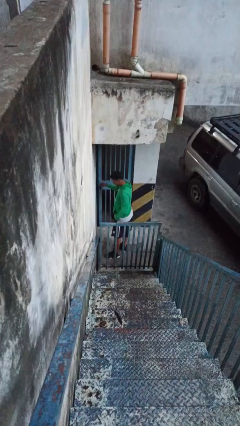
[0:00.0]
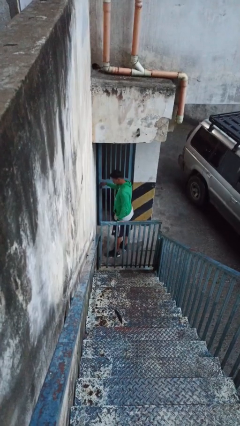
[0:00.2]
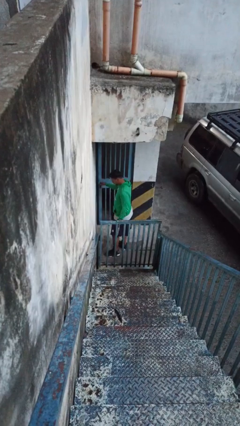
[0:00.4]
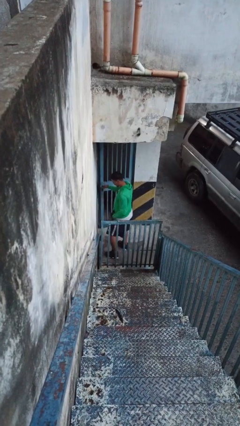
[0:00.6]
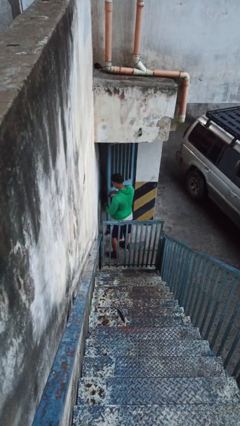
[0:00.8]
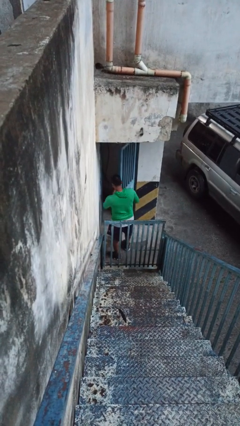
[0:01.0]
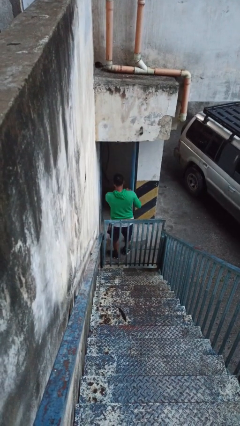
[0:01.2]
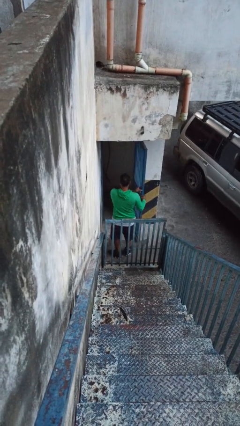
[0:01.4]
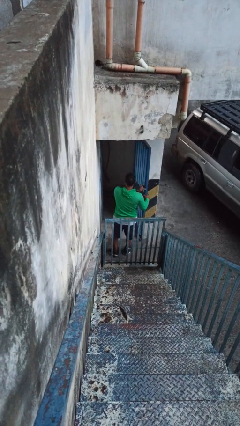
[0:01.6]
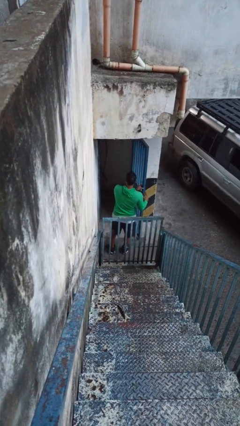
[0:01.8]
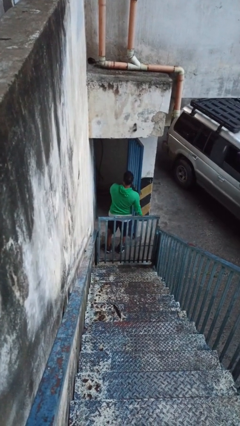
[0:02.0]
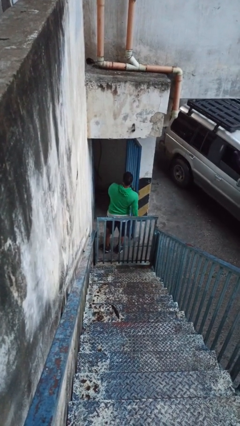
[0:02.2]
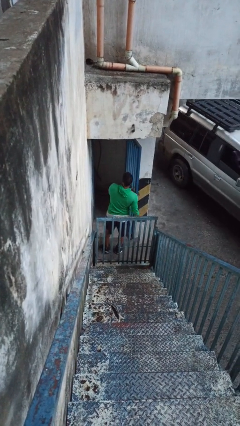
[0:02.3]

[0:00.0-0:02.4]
person opens facility door

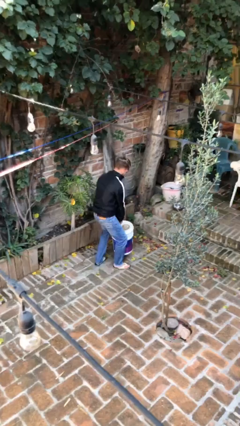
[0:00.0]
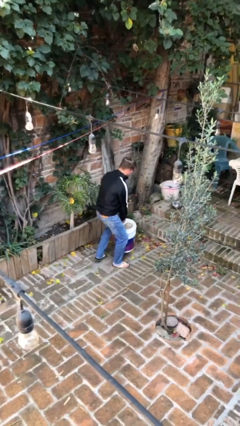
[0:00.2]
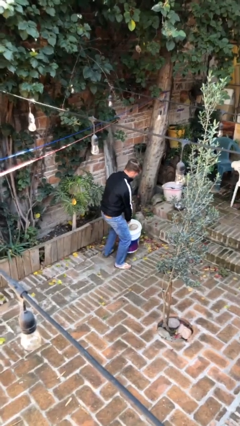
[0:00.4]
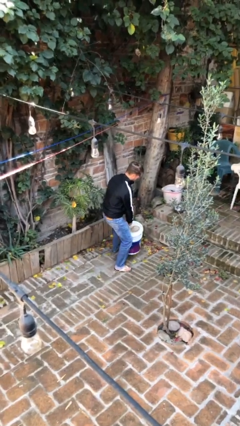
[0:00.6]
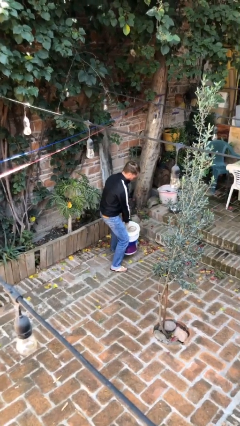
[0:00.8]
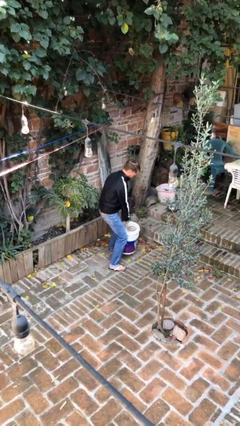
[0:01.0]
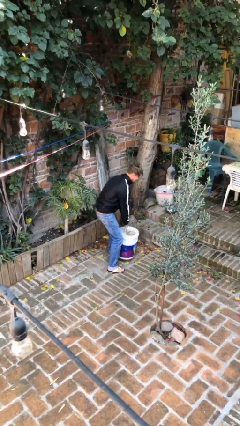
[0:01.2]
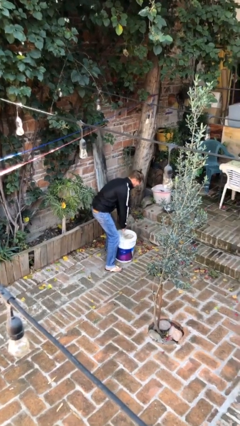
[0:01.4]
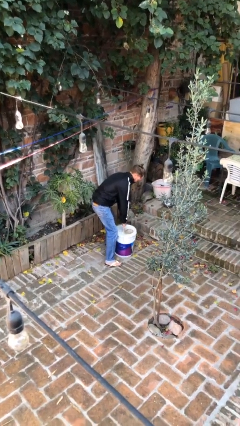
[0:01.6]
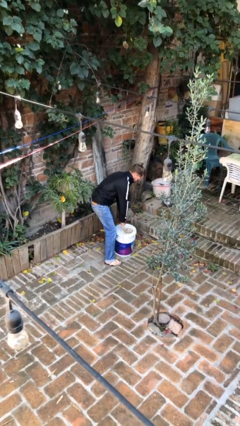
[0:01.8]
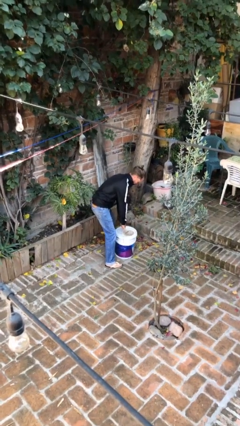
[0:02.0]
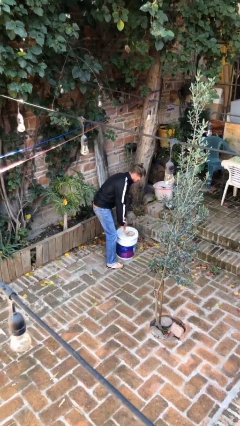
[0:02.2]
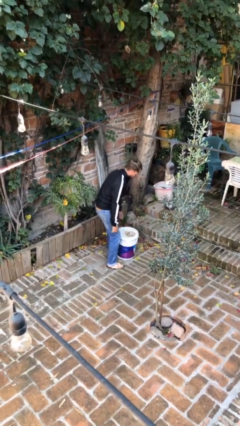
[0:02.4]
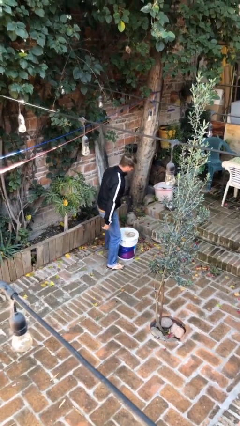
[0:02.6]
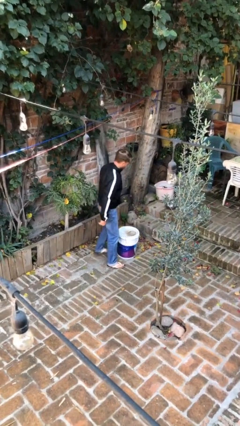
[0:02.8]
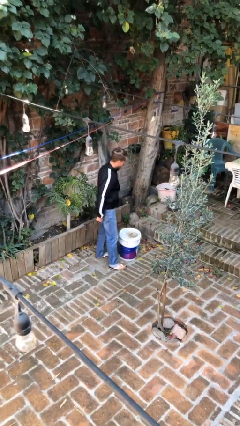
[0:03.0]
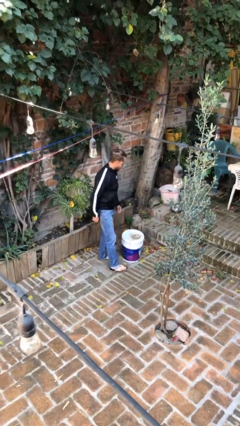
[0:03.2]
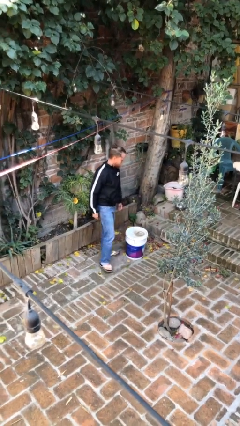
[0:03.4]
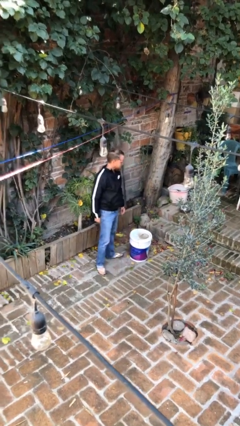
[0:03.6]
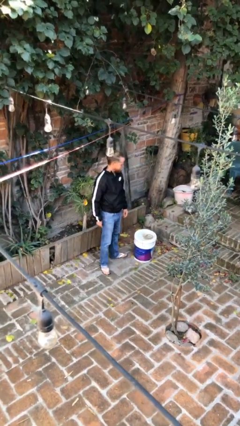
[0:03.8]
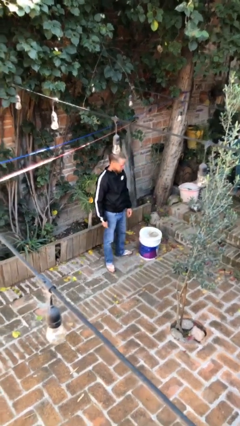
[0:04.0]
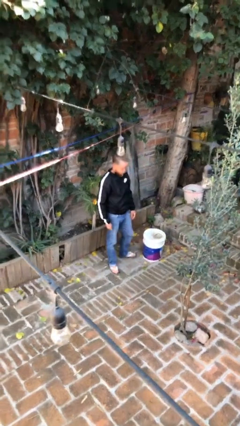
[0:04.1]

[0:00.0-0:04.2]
person puts down object on floor

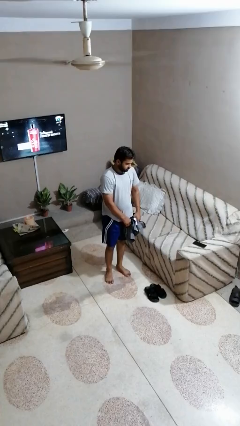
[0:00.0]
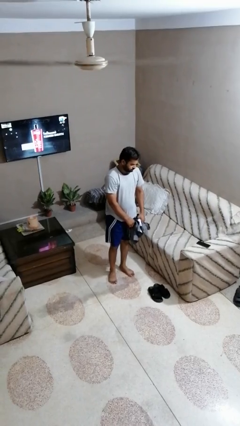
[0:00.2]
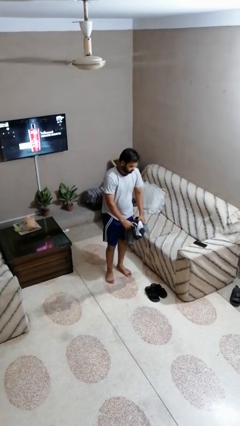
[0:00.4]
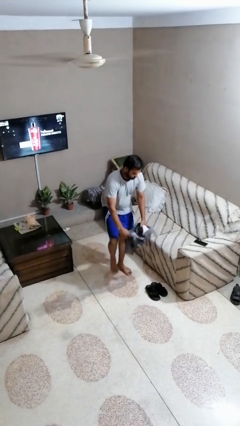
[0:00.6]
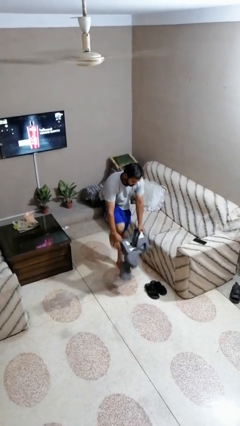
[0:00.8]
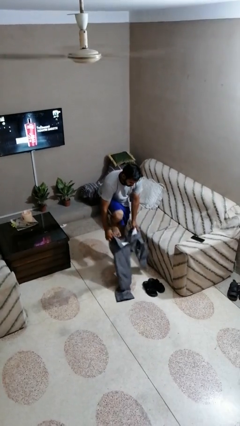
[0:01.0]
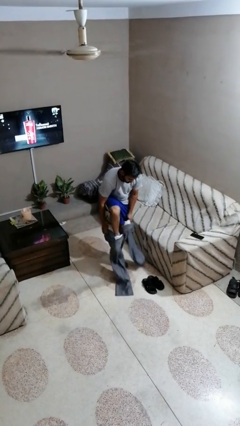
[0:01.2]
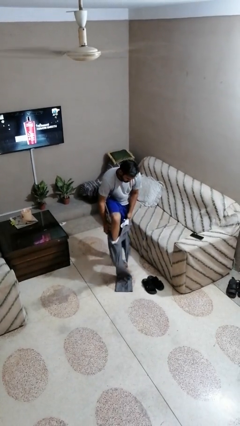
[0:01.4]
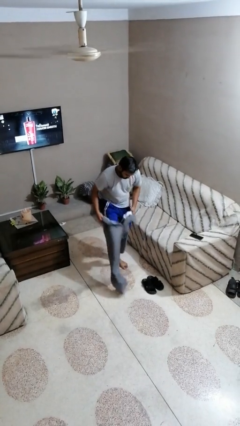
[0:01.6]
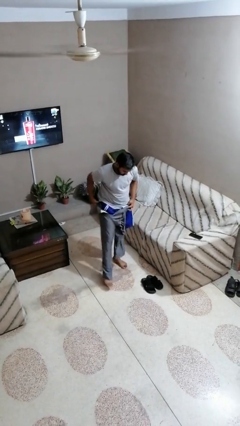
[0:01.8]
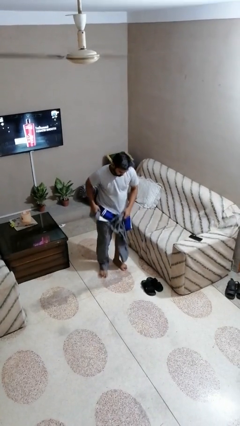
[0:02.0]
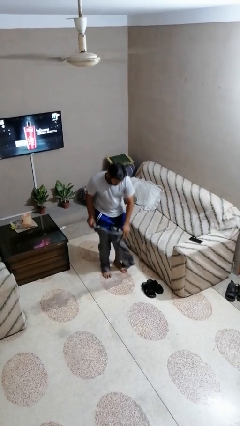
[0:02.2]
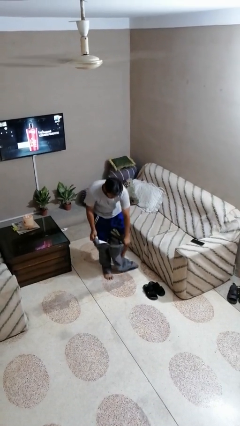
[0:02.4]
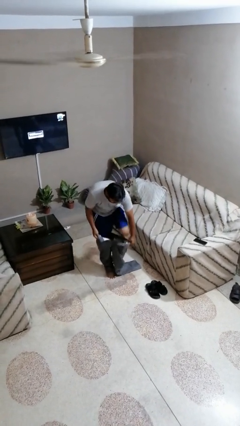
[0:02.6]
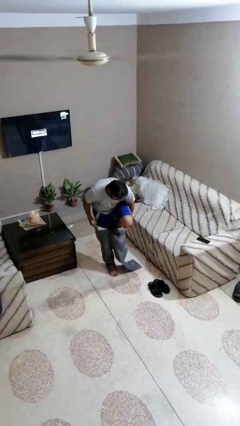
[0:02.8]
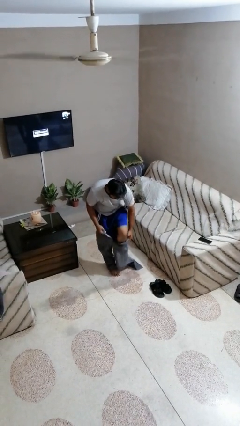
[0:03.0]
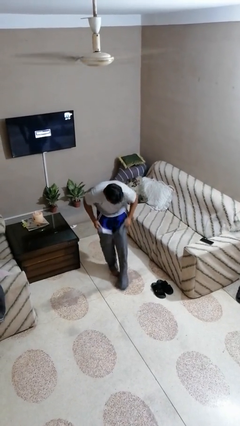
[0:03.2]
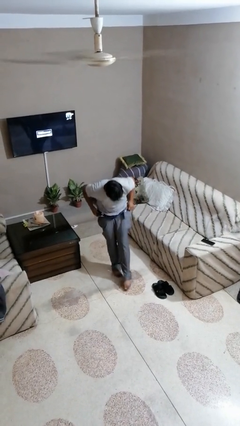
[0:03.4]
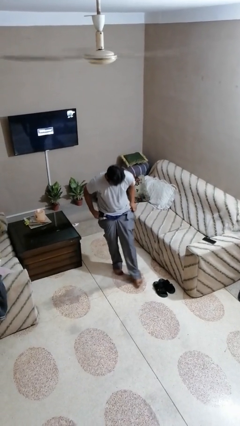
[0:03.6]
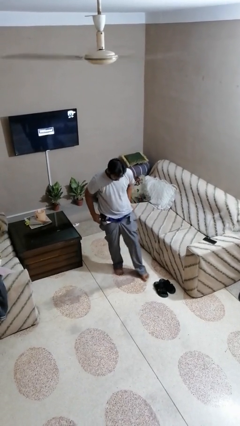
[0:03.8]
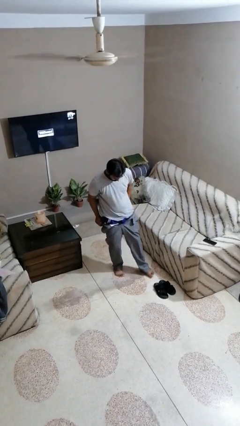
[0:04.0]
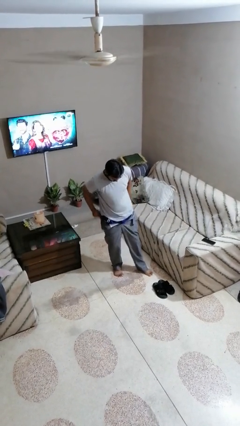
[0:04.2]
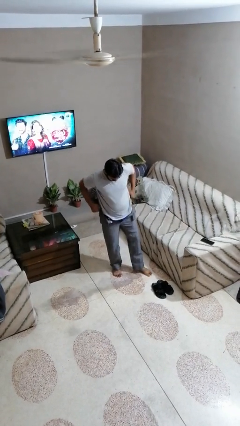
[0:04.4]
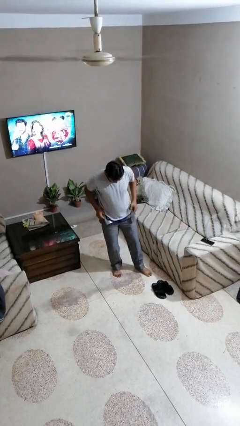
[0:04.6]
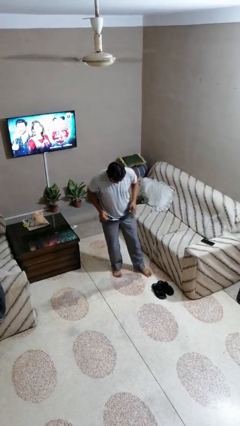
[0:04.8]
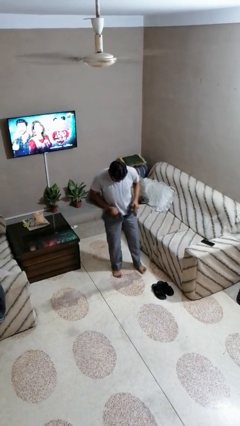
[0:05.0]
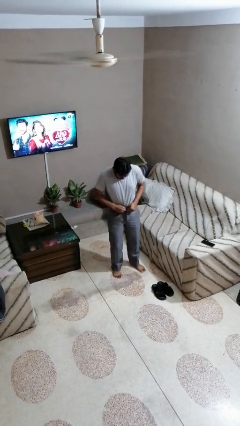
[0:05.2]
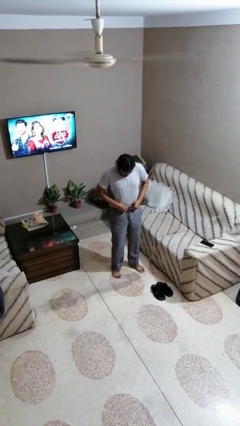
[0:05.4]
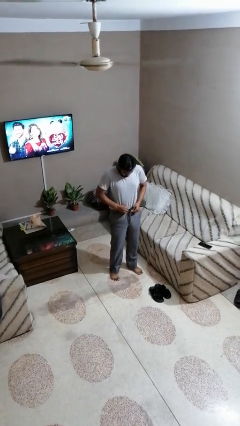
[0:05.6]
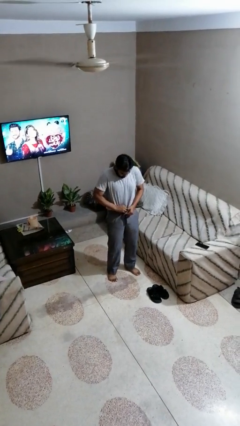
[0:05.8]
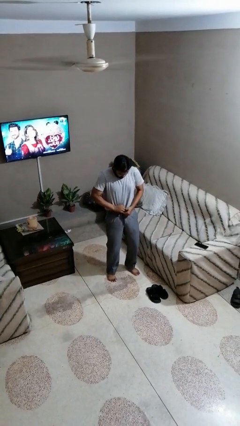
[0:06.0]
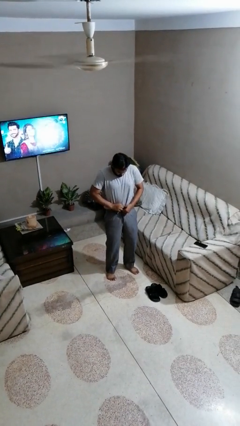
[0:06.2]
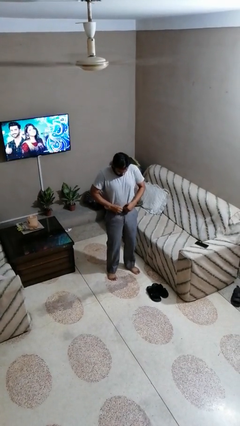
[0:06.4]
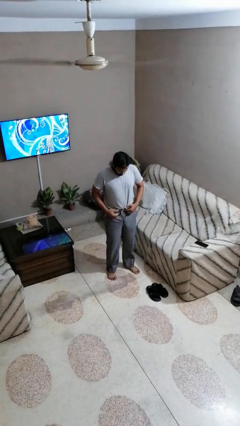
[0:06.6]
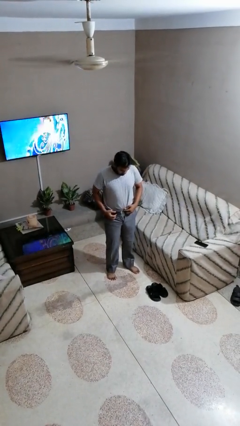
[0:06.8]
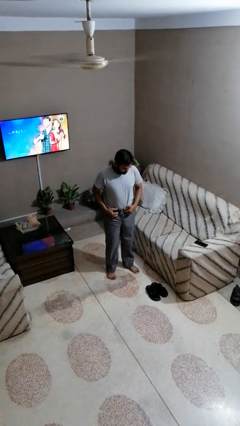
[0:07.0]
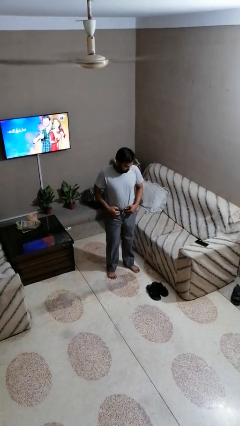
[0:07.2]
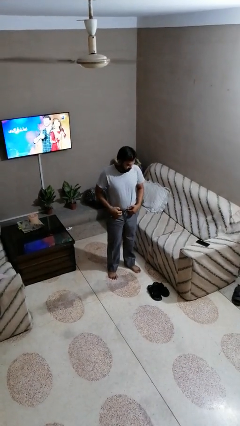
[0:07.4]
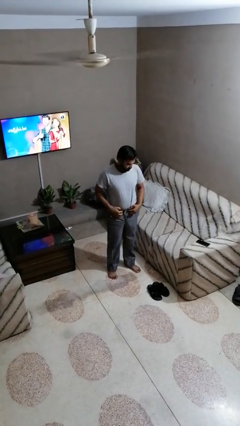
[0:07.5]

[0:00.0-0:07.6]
person puts on pants

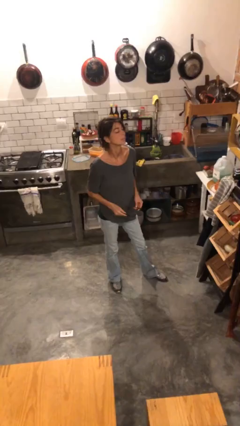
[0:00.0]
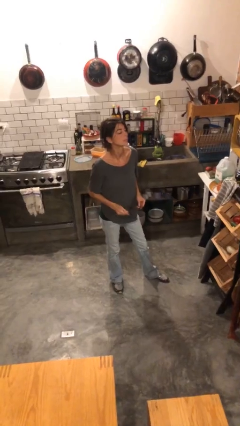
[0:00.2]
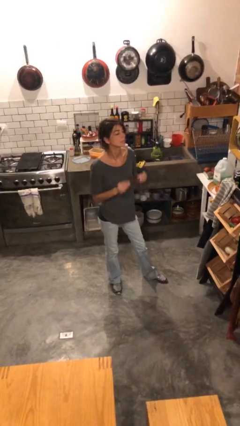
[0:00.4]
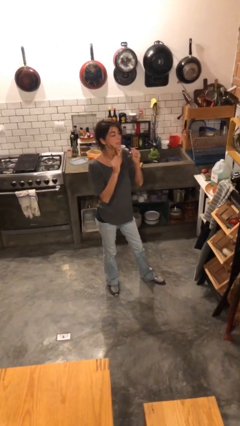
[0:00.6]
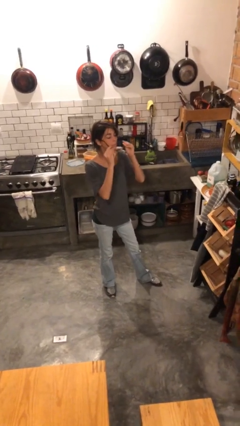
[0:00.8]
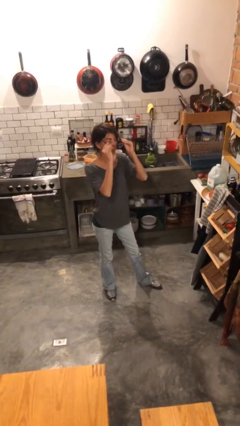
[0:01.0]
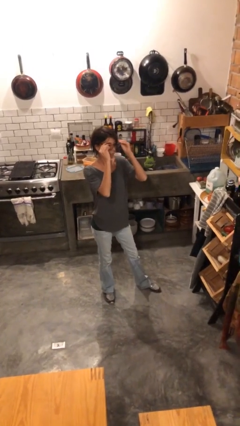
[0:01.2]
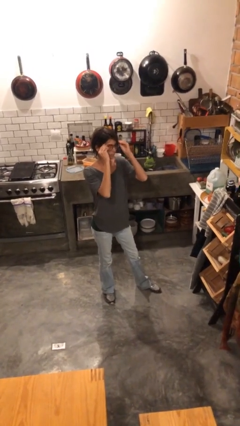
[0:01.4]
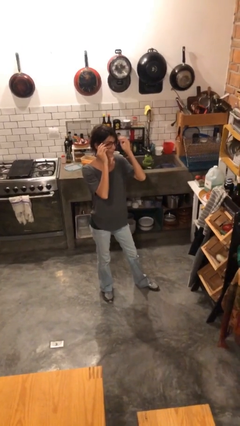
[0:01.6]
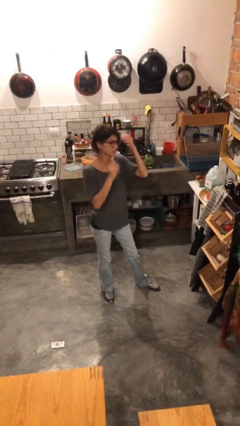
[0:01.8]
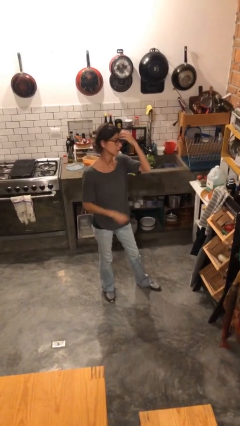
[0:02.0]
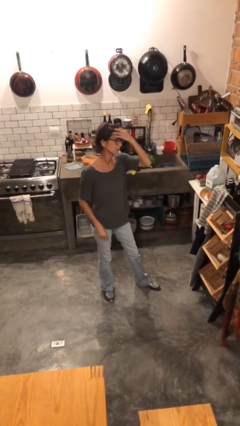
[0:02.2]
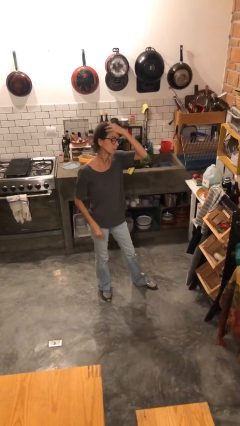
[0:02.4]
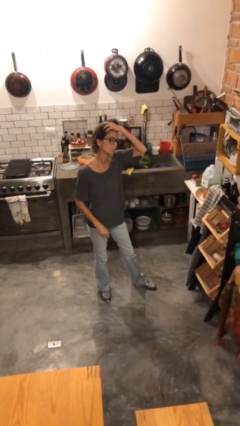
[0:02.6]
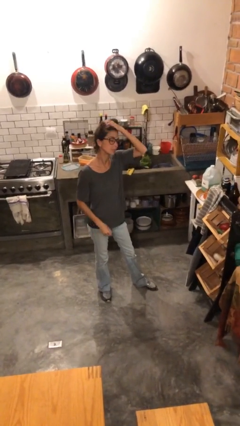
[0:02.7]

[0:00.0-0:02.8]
person puts on glasses

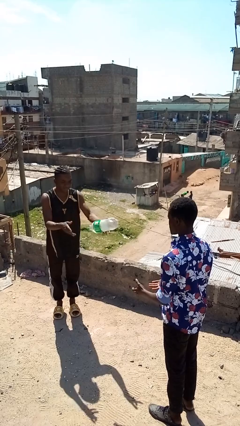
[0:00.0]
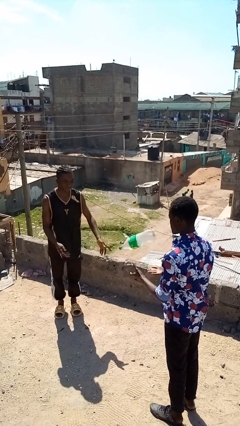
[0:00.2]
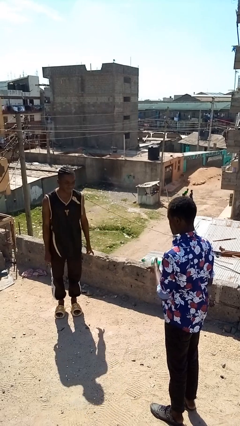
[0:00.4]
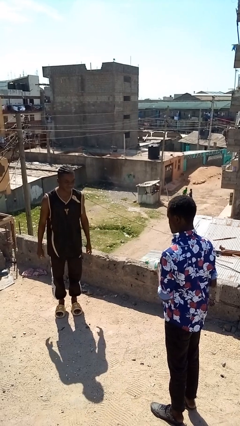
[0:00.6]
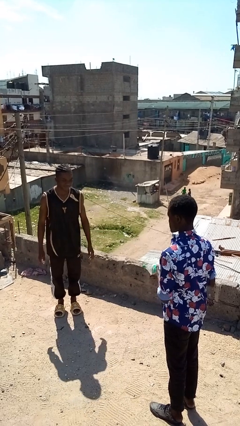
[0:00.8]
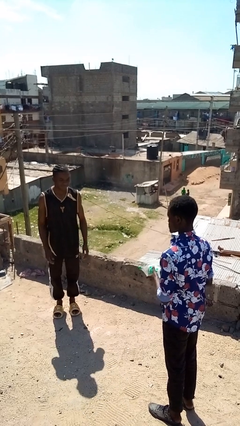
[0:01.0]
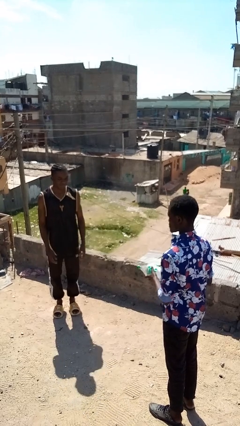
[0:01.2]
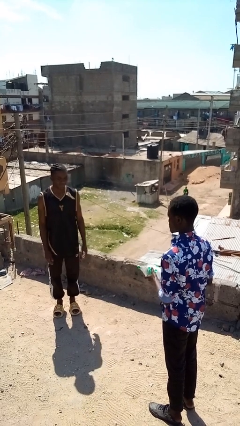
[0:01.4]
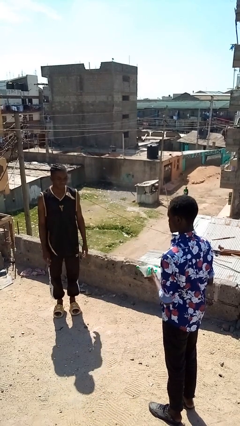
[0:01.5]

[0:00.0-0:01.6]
person catches object from person
